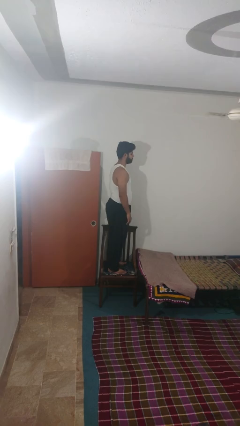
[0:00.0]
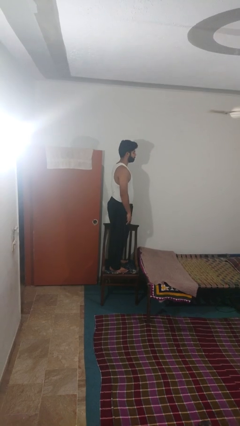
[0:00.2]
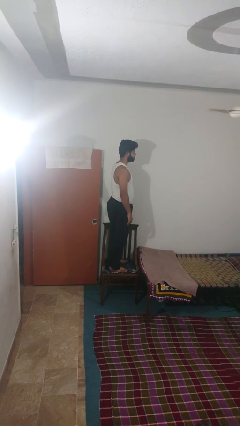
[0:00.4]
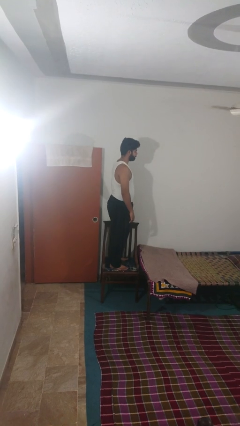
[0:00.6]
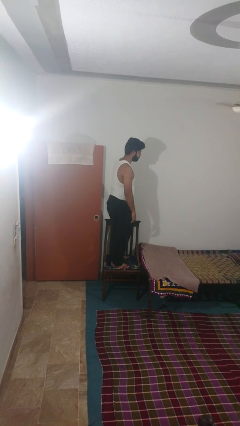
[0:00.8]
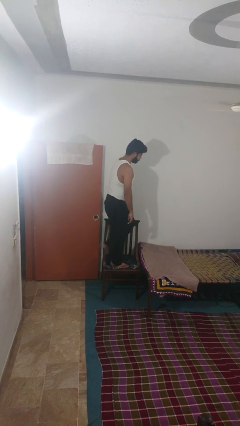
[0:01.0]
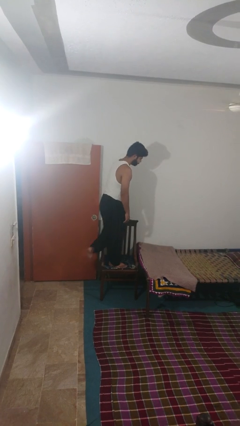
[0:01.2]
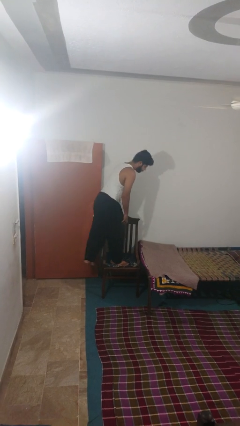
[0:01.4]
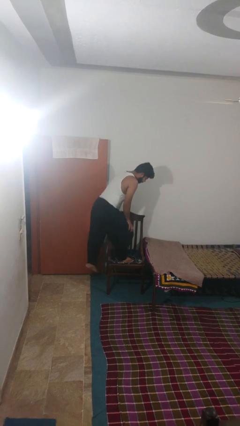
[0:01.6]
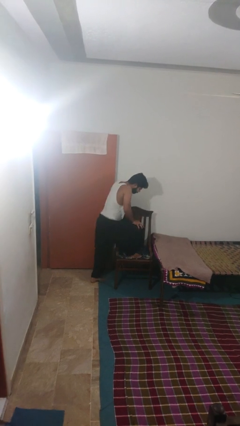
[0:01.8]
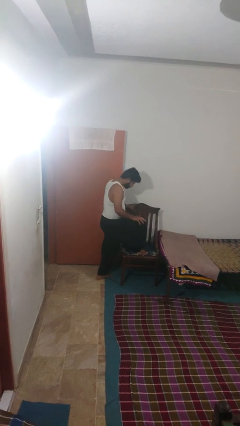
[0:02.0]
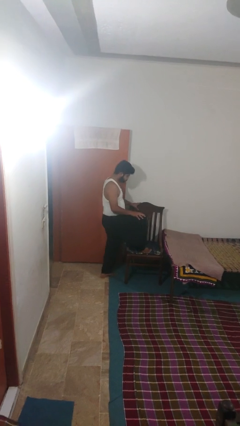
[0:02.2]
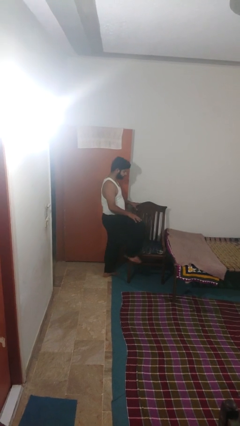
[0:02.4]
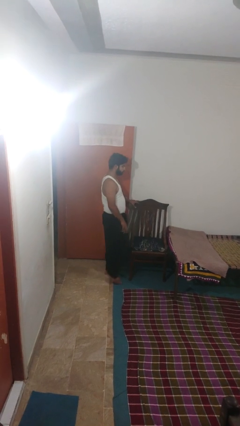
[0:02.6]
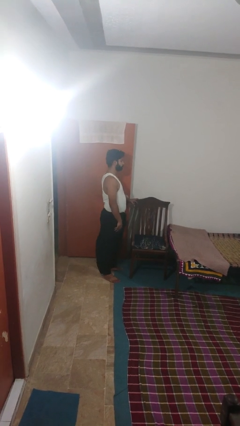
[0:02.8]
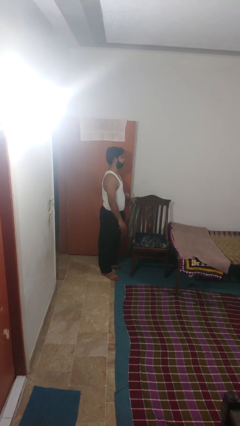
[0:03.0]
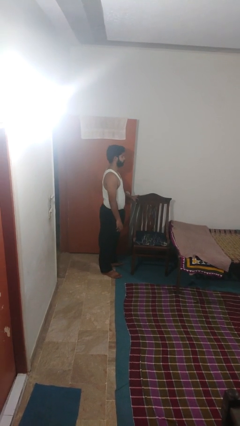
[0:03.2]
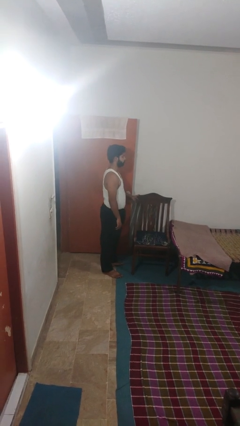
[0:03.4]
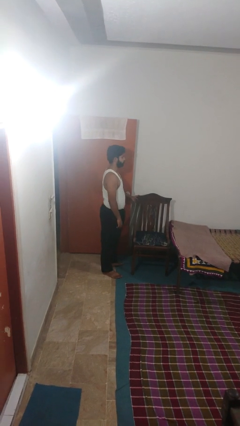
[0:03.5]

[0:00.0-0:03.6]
person climbs off chair

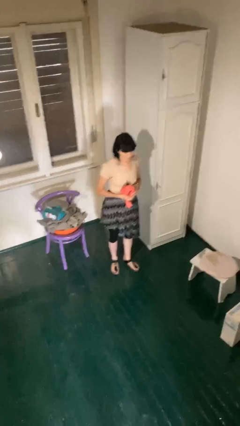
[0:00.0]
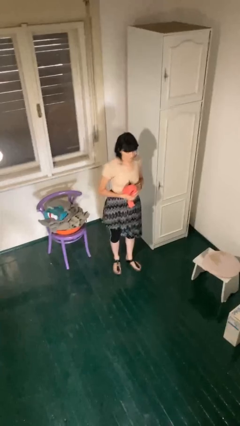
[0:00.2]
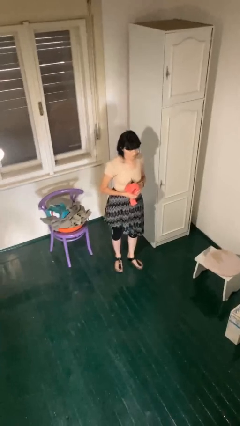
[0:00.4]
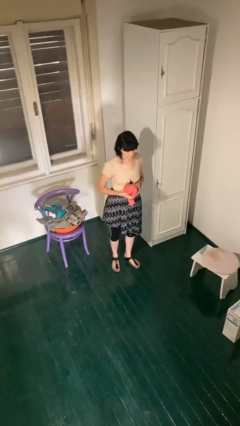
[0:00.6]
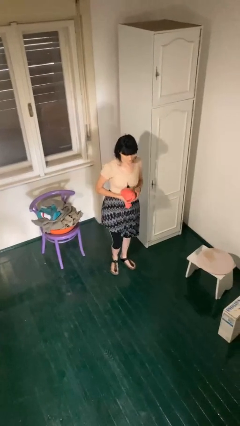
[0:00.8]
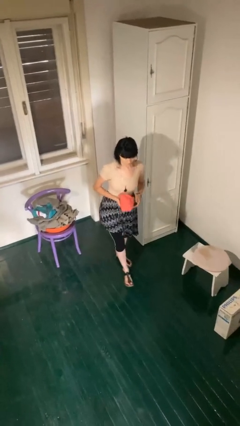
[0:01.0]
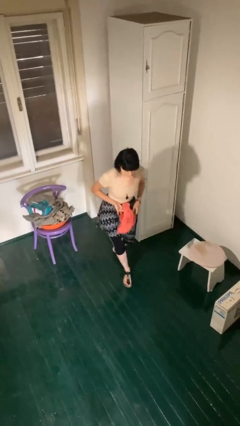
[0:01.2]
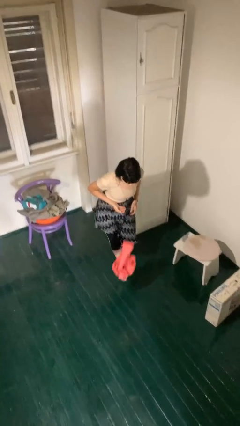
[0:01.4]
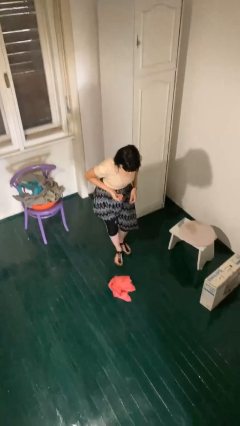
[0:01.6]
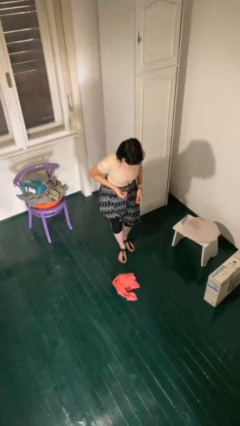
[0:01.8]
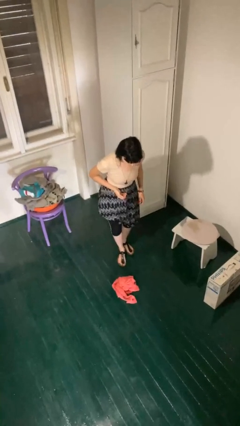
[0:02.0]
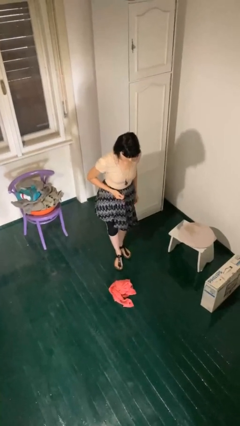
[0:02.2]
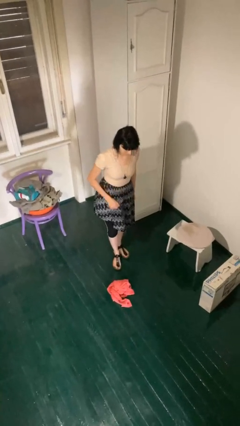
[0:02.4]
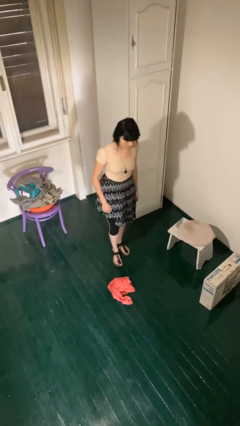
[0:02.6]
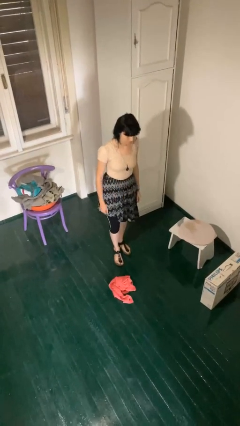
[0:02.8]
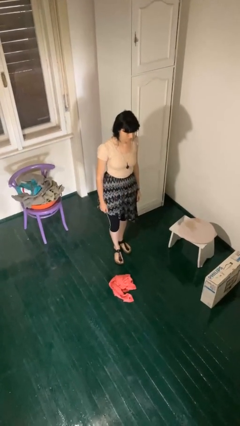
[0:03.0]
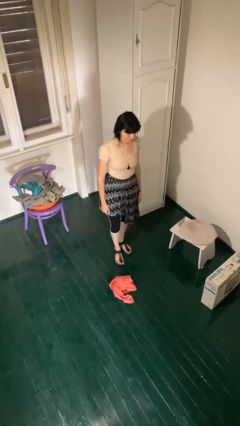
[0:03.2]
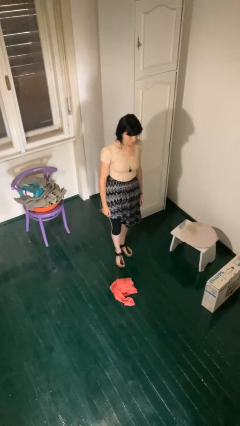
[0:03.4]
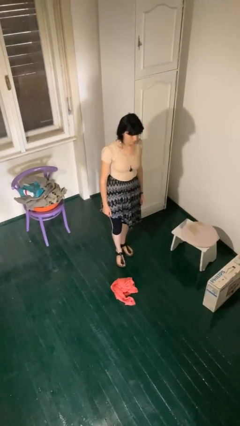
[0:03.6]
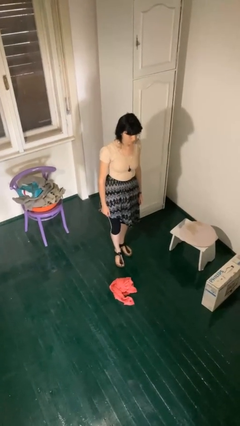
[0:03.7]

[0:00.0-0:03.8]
person drops object

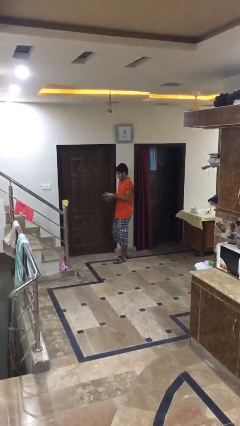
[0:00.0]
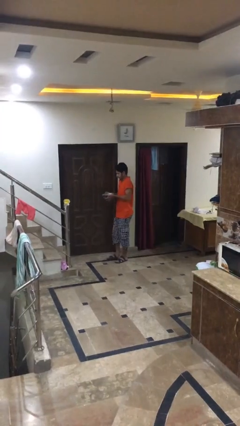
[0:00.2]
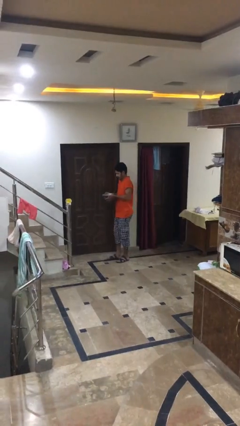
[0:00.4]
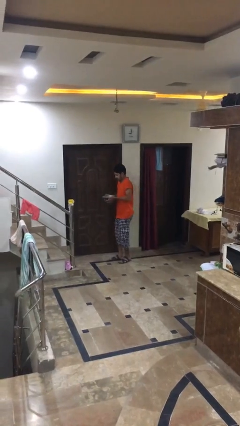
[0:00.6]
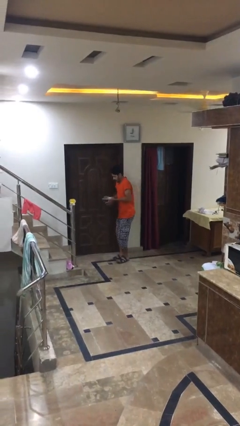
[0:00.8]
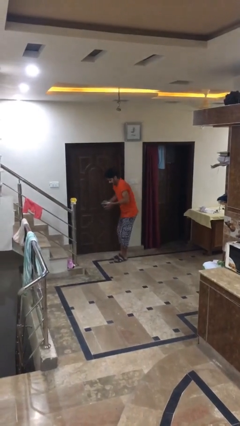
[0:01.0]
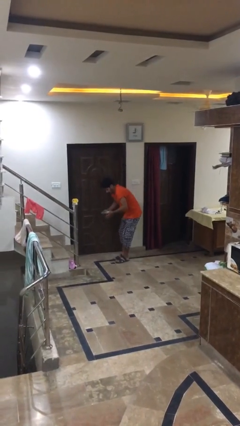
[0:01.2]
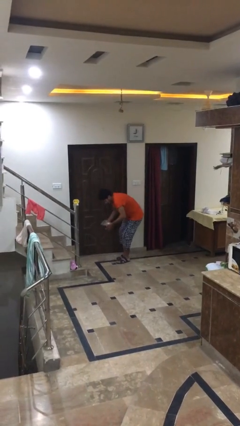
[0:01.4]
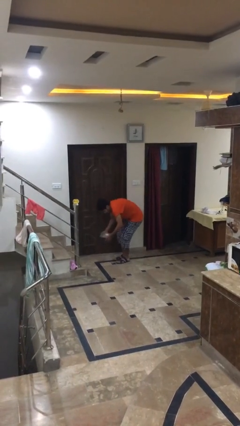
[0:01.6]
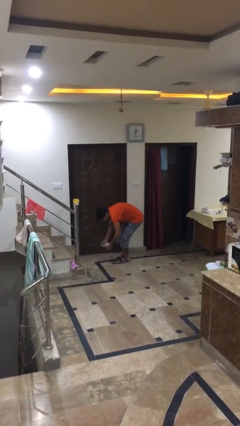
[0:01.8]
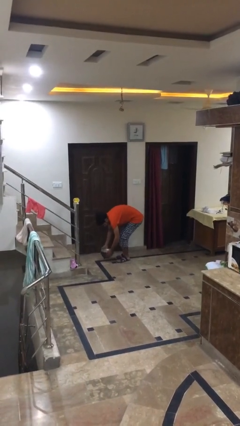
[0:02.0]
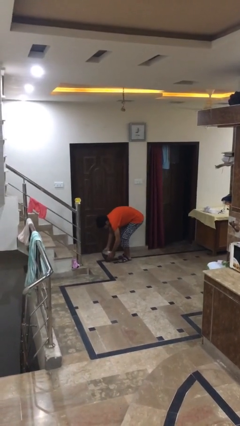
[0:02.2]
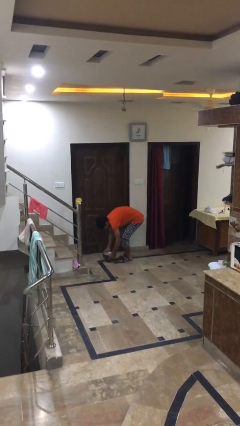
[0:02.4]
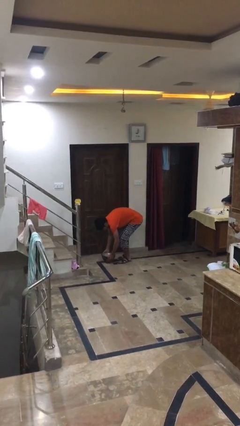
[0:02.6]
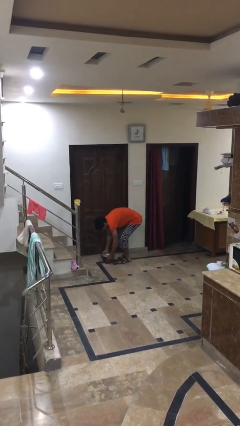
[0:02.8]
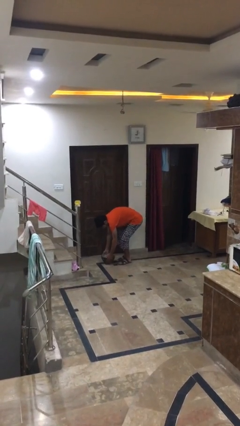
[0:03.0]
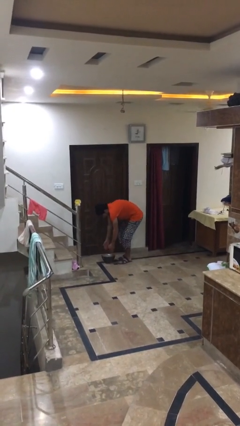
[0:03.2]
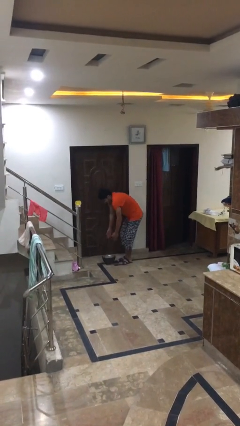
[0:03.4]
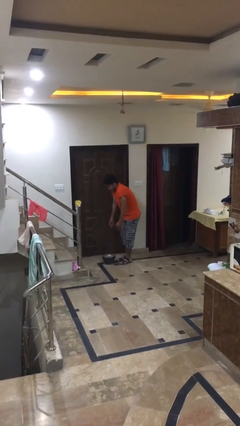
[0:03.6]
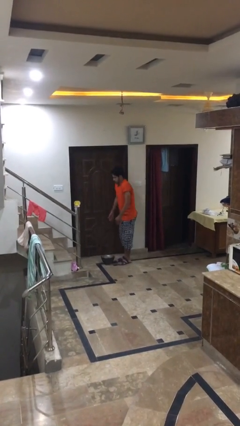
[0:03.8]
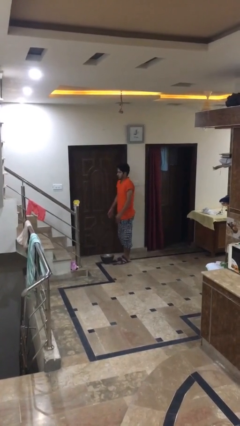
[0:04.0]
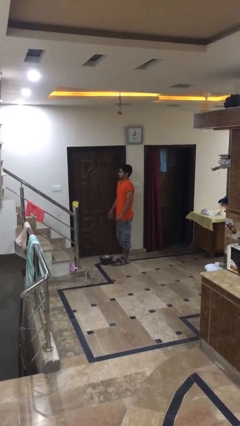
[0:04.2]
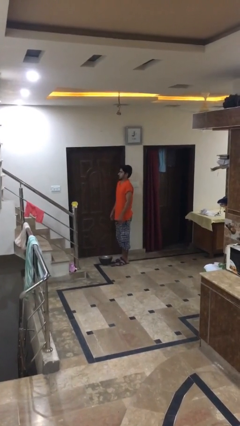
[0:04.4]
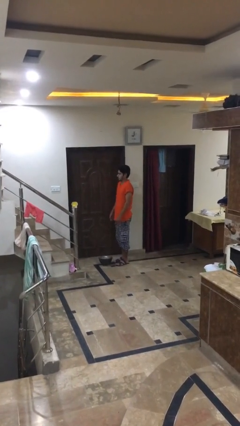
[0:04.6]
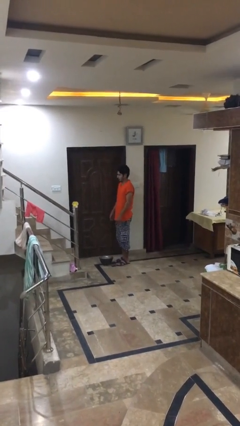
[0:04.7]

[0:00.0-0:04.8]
person puts down object on floor

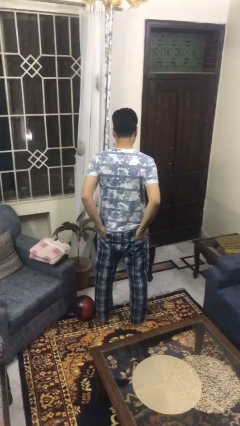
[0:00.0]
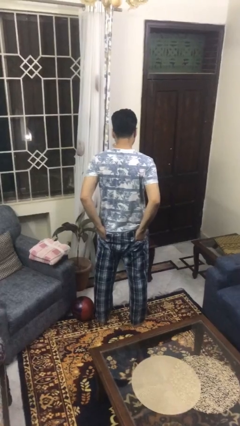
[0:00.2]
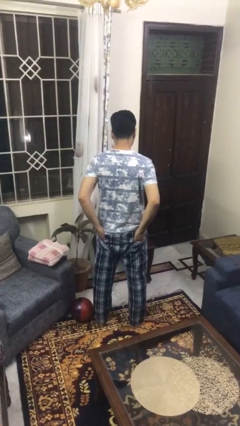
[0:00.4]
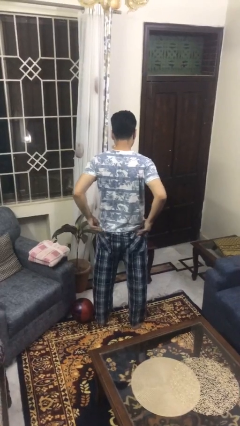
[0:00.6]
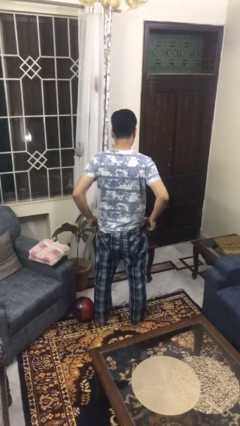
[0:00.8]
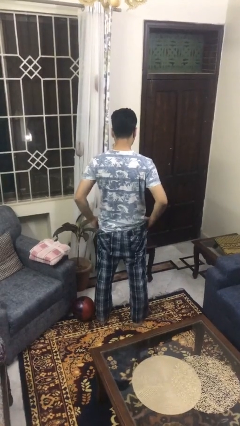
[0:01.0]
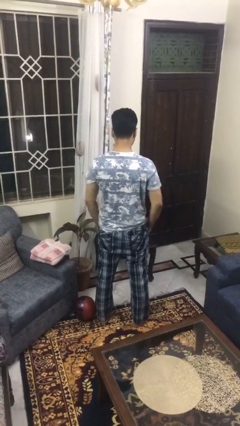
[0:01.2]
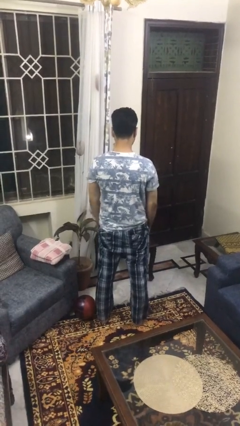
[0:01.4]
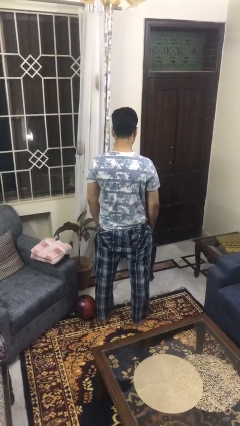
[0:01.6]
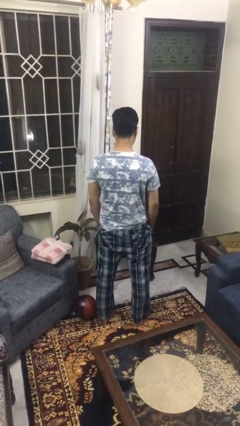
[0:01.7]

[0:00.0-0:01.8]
person puts hands in back pockets

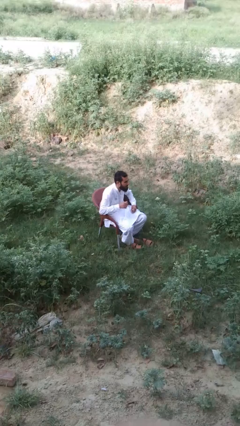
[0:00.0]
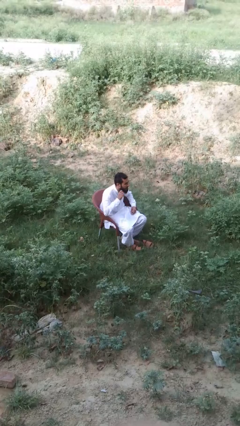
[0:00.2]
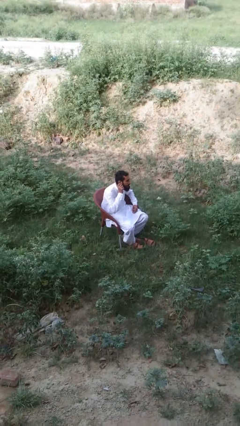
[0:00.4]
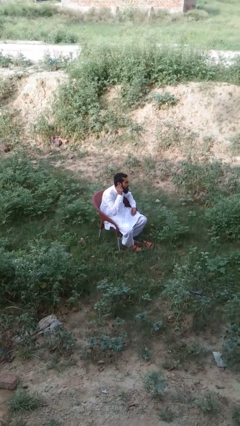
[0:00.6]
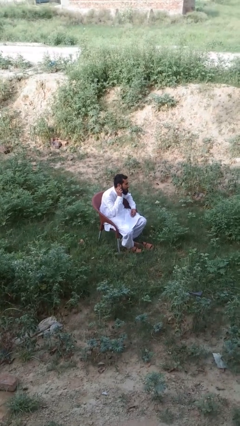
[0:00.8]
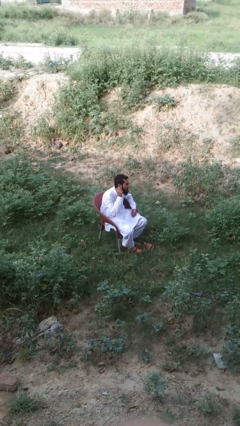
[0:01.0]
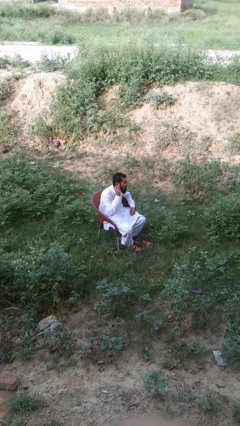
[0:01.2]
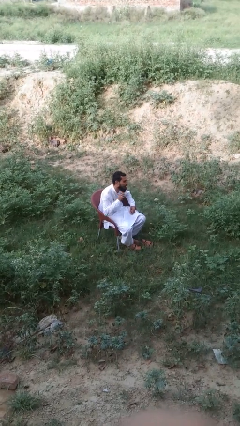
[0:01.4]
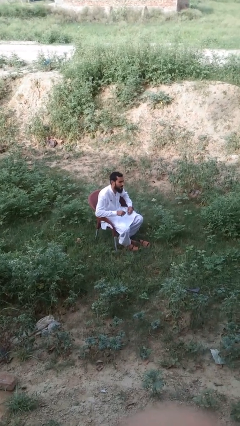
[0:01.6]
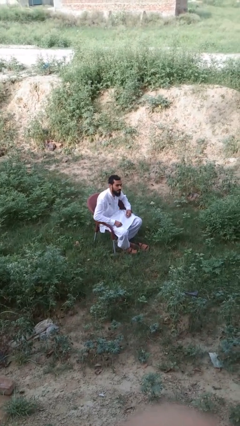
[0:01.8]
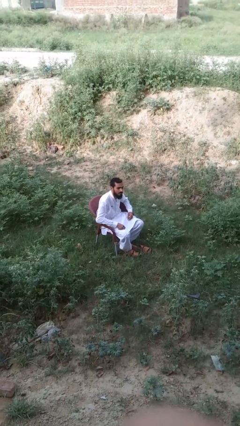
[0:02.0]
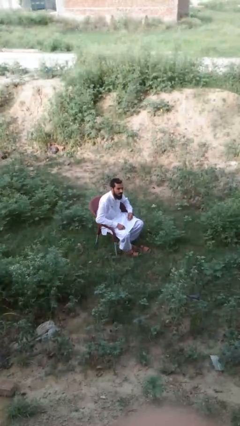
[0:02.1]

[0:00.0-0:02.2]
person touches earlobe

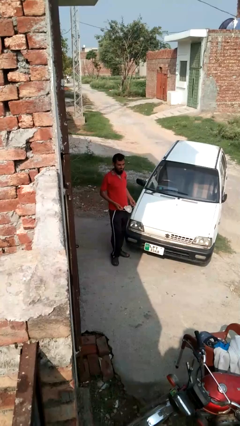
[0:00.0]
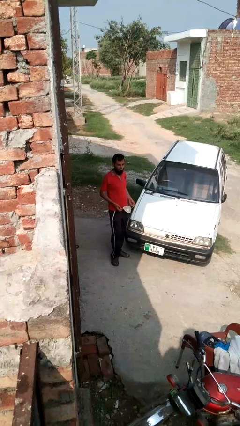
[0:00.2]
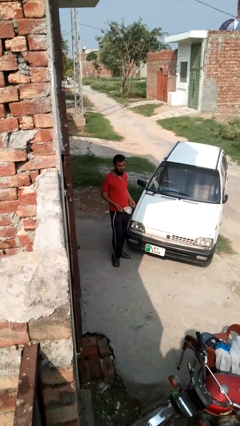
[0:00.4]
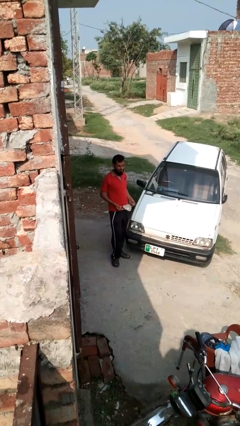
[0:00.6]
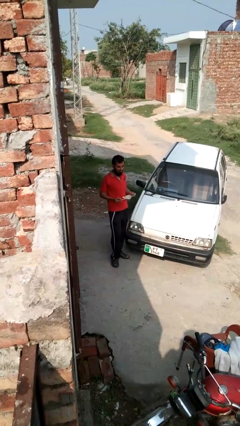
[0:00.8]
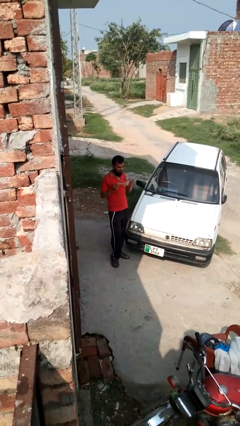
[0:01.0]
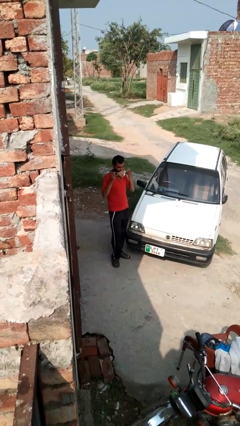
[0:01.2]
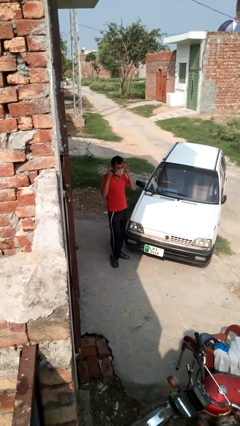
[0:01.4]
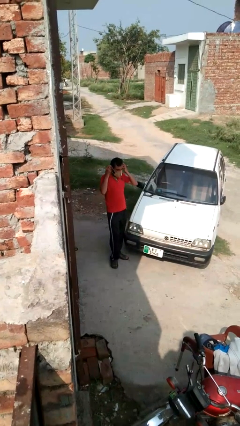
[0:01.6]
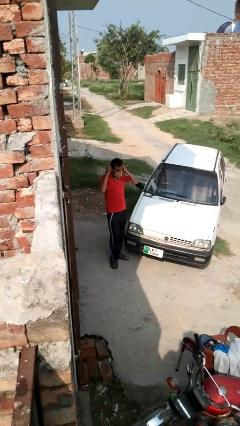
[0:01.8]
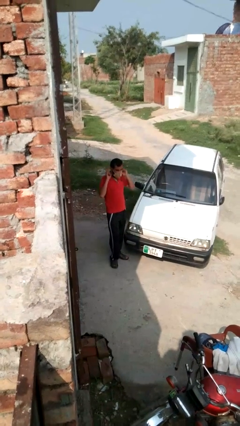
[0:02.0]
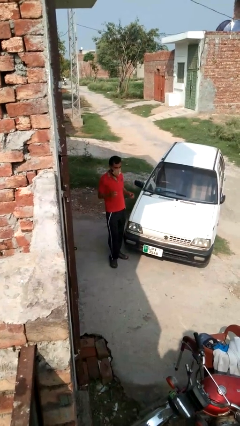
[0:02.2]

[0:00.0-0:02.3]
person puts on facemask
